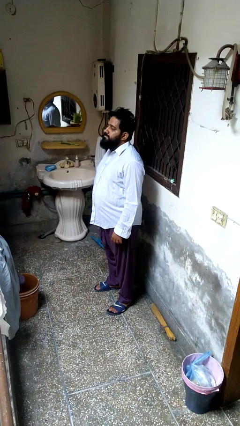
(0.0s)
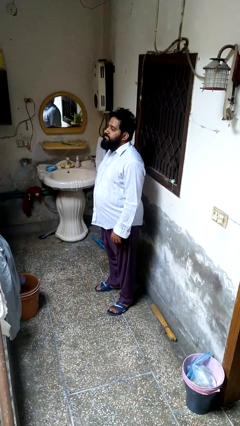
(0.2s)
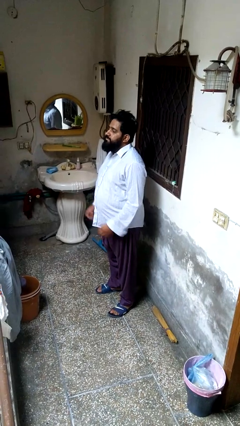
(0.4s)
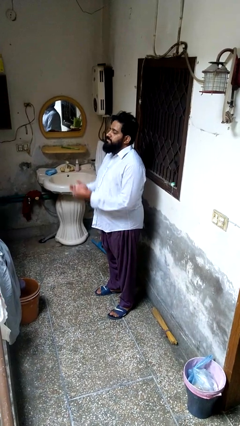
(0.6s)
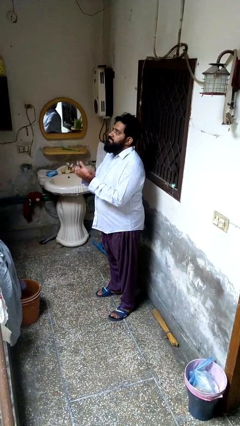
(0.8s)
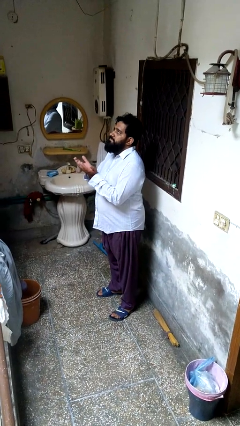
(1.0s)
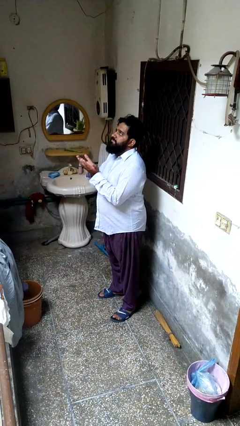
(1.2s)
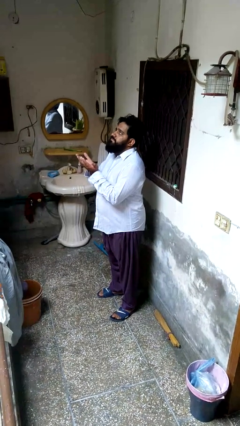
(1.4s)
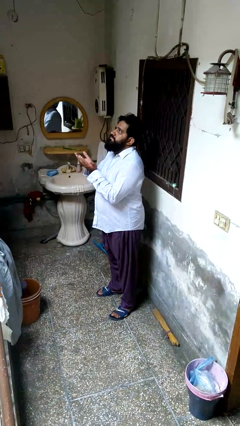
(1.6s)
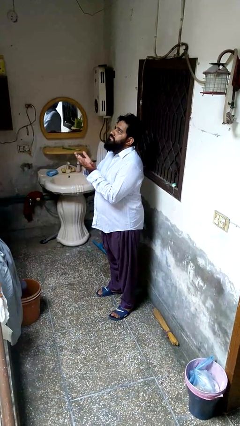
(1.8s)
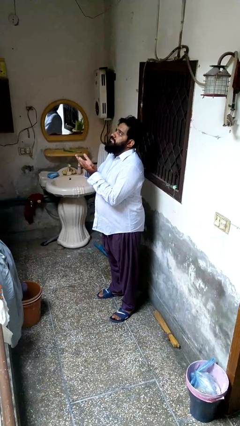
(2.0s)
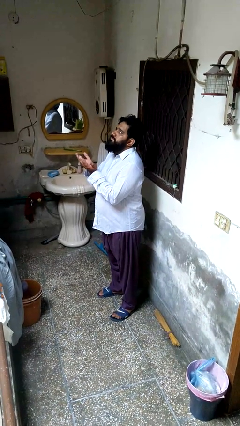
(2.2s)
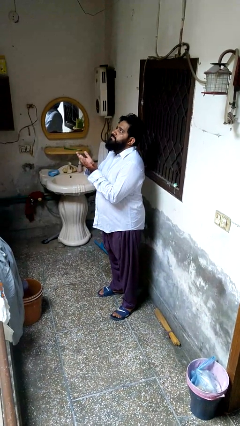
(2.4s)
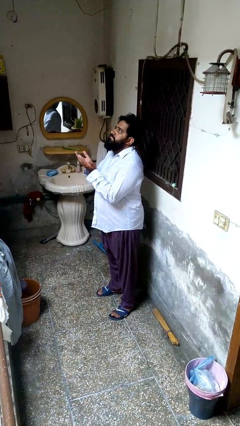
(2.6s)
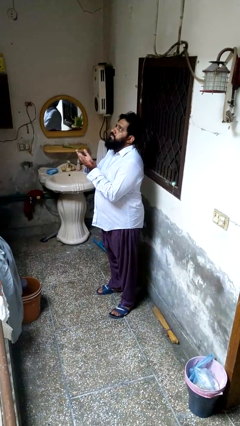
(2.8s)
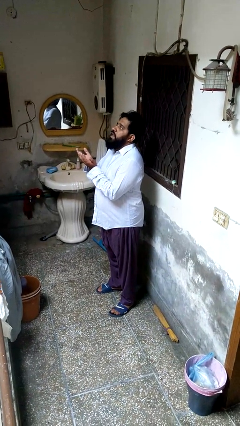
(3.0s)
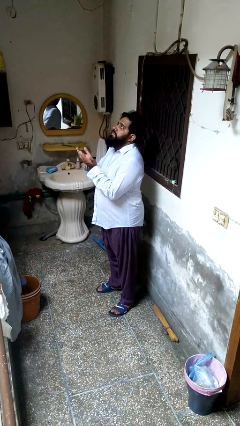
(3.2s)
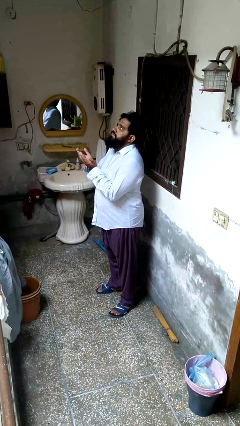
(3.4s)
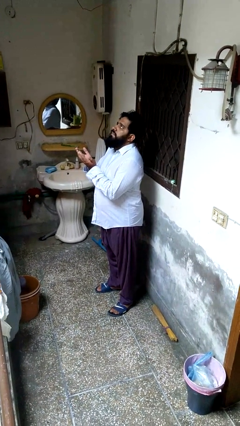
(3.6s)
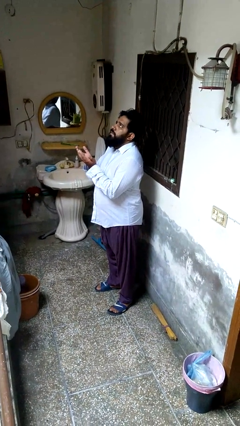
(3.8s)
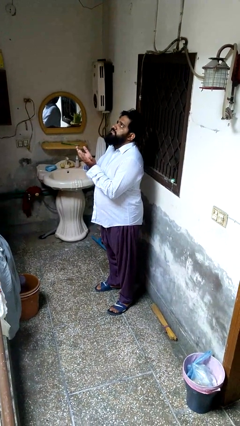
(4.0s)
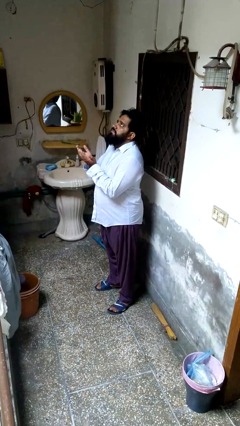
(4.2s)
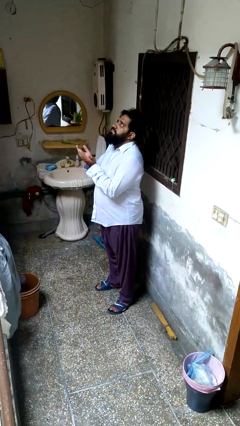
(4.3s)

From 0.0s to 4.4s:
person prays

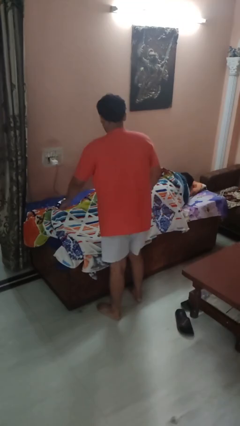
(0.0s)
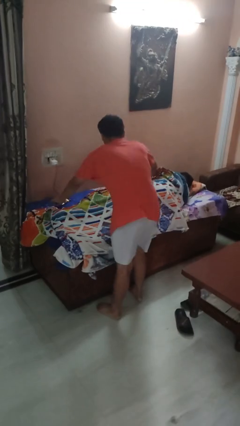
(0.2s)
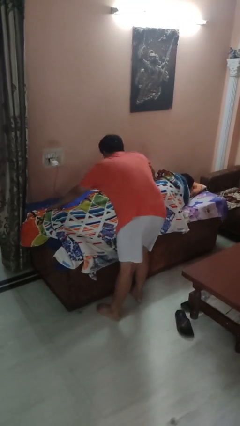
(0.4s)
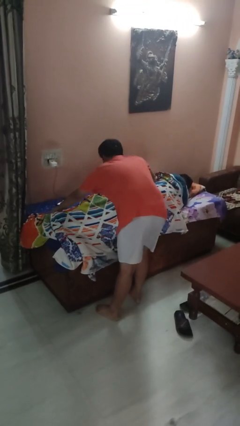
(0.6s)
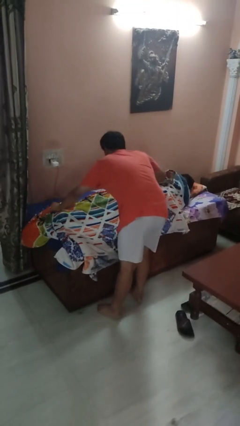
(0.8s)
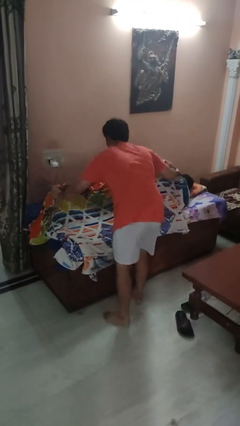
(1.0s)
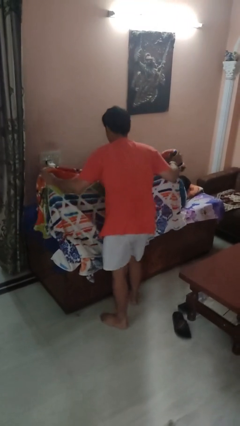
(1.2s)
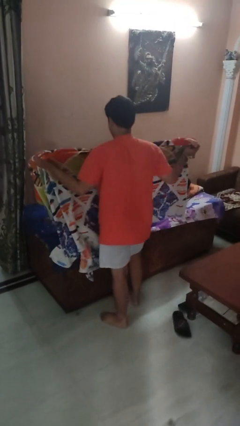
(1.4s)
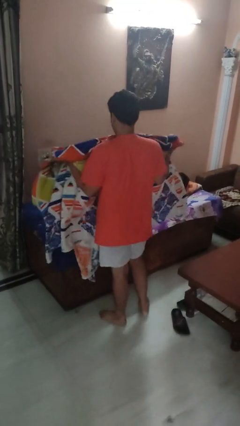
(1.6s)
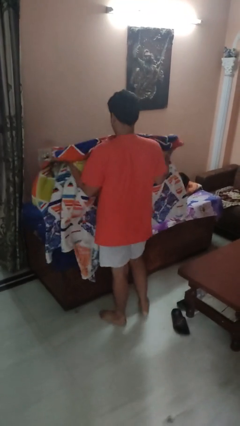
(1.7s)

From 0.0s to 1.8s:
person uncovers friend with blanket

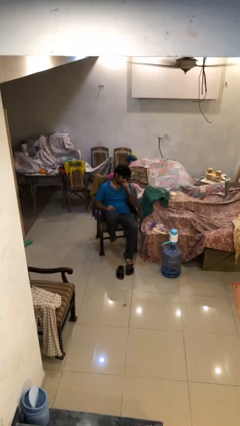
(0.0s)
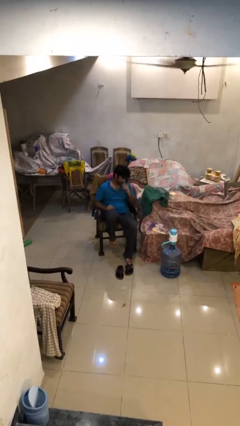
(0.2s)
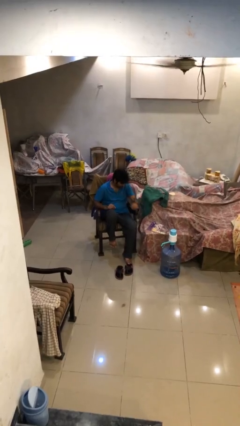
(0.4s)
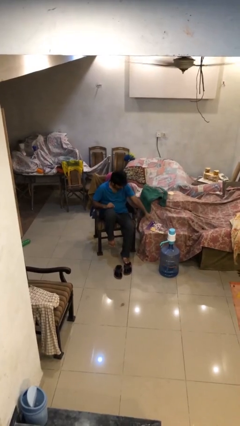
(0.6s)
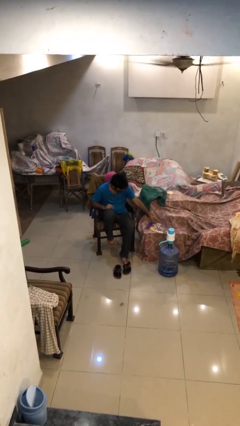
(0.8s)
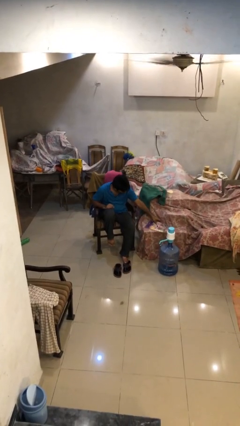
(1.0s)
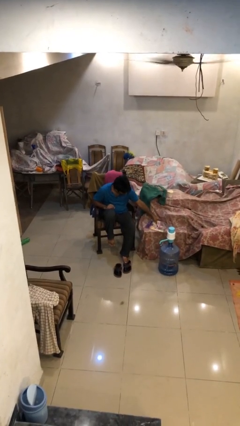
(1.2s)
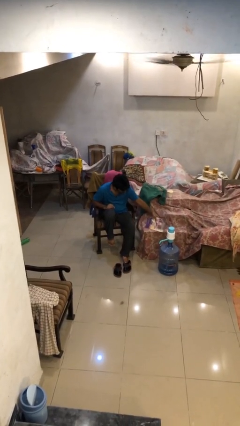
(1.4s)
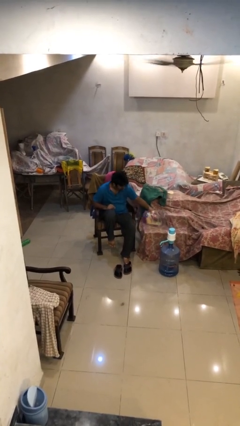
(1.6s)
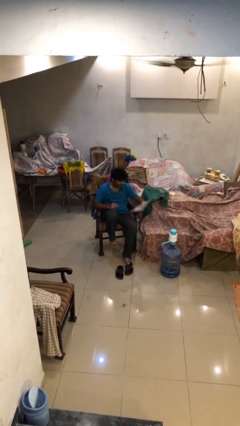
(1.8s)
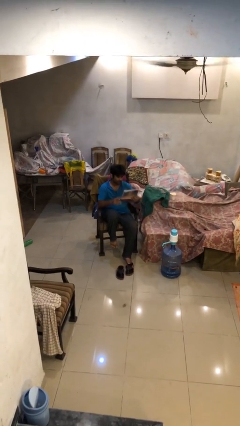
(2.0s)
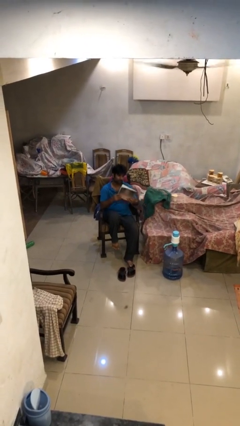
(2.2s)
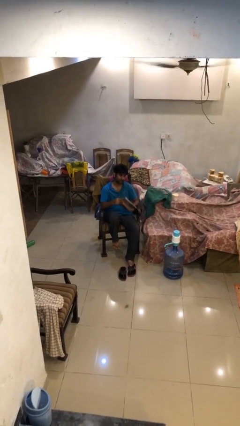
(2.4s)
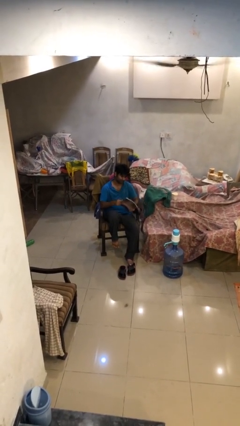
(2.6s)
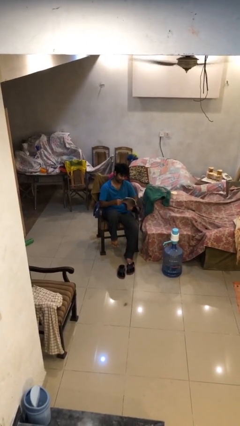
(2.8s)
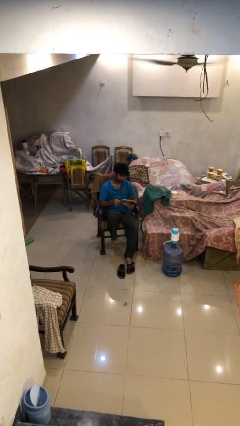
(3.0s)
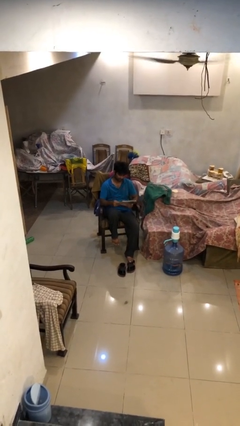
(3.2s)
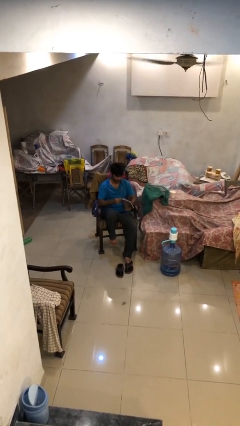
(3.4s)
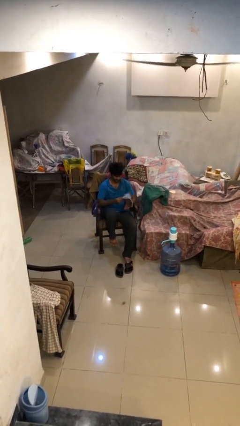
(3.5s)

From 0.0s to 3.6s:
person picks up object from table

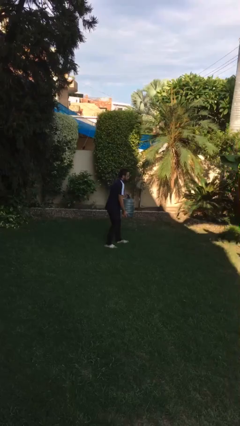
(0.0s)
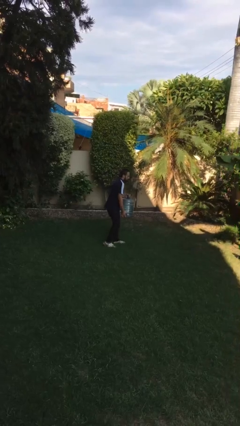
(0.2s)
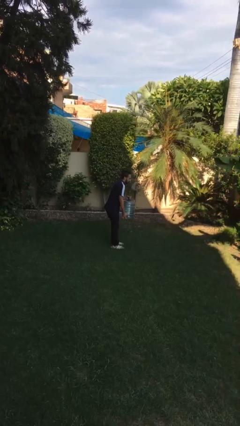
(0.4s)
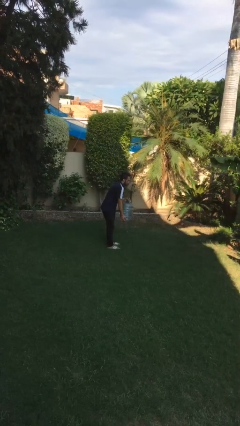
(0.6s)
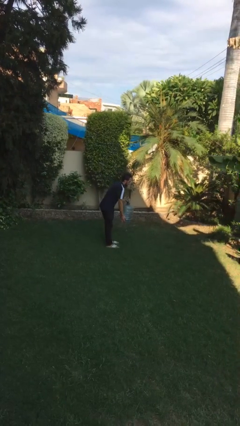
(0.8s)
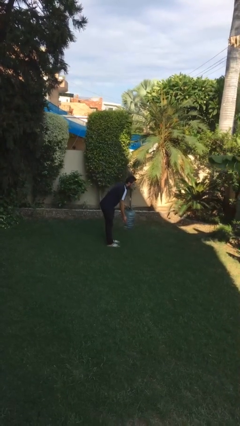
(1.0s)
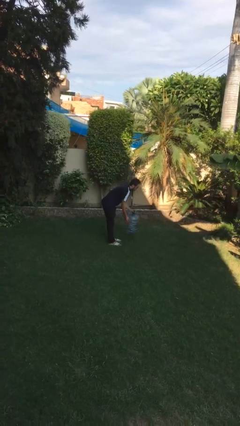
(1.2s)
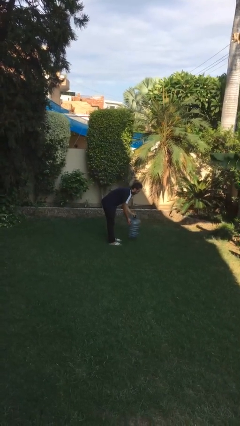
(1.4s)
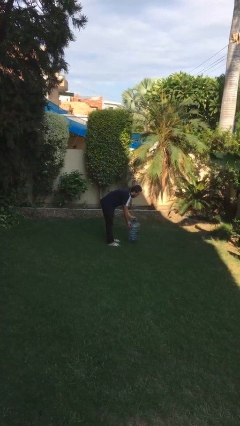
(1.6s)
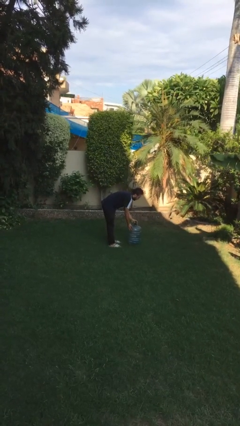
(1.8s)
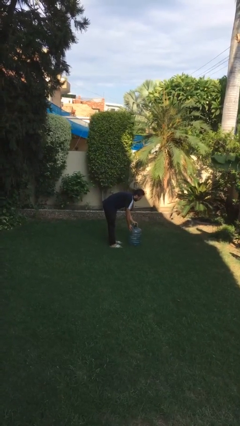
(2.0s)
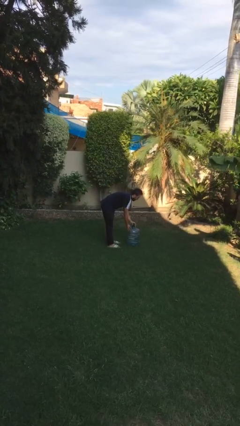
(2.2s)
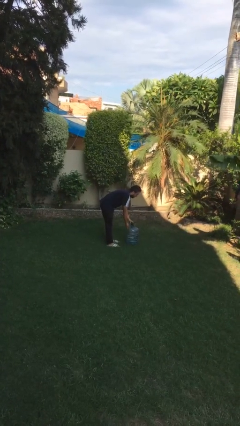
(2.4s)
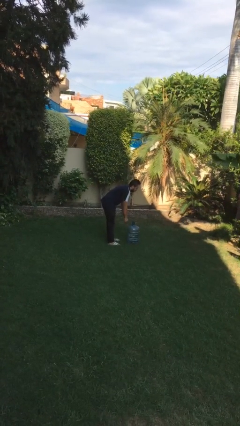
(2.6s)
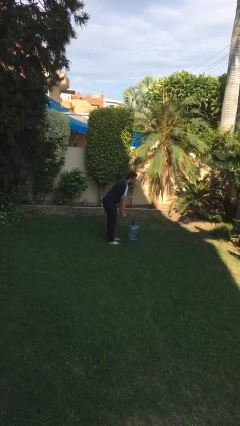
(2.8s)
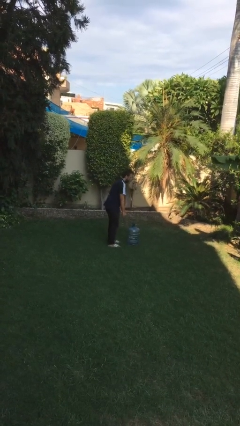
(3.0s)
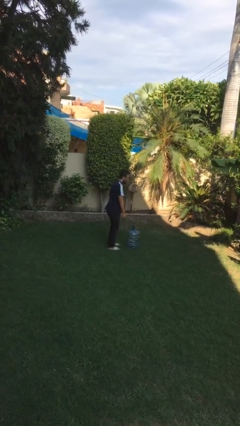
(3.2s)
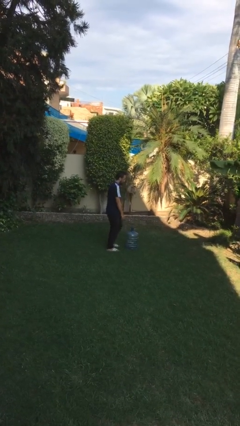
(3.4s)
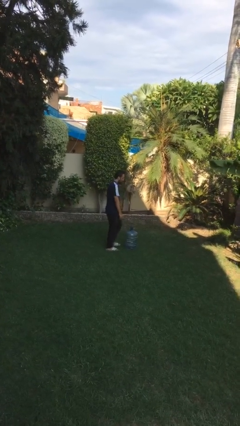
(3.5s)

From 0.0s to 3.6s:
person puts down object on floor

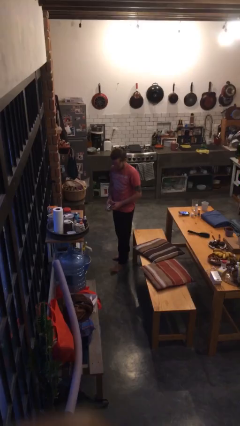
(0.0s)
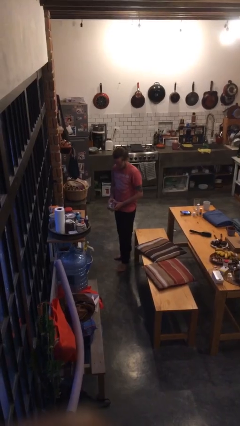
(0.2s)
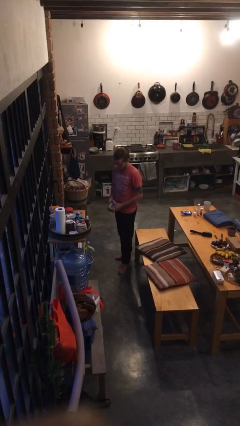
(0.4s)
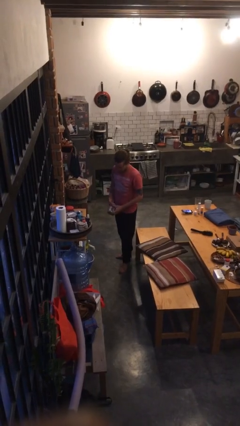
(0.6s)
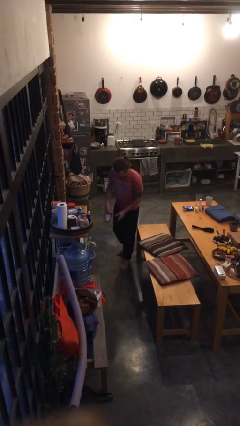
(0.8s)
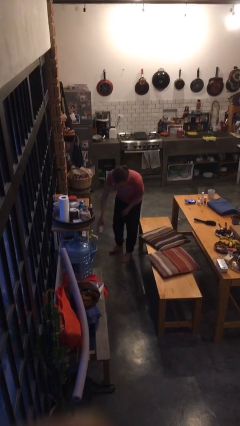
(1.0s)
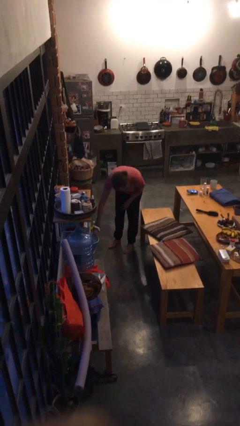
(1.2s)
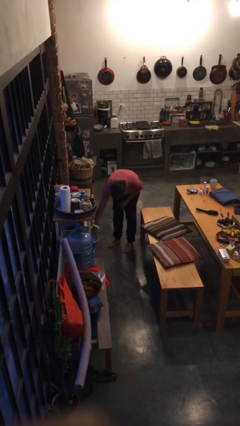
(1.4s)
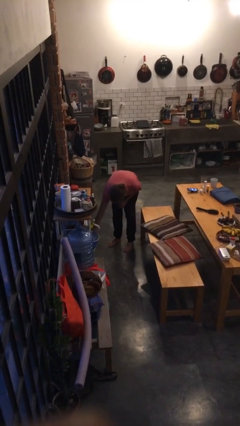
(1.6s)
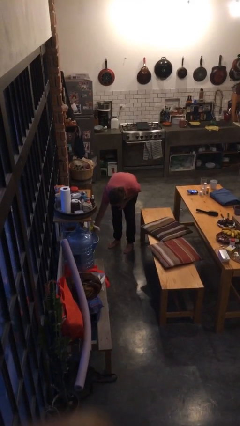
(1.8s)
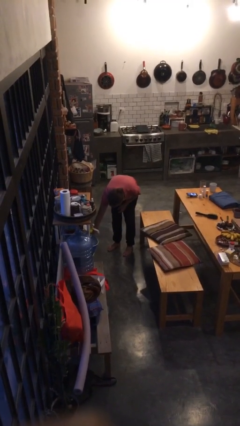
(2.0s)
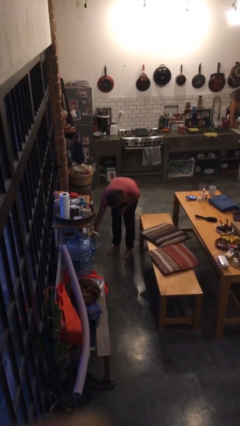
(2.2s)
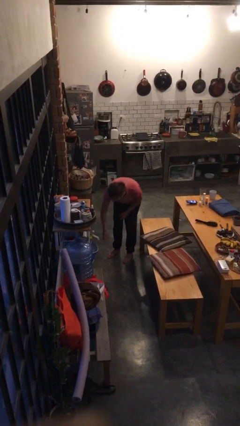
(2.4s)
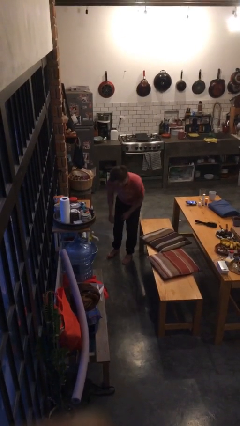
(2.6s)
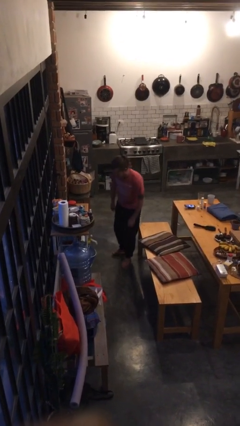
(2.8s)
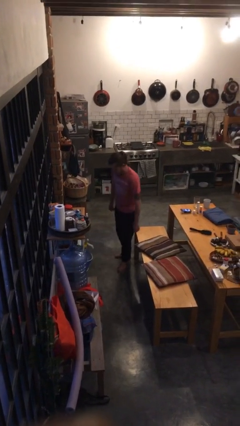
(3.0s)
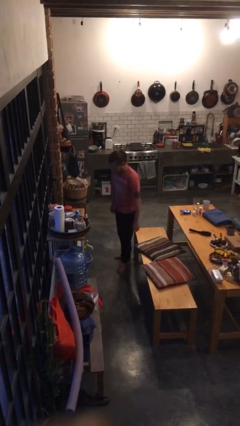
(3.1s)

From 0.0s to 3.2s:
person puts down object into cabinet

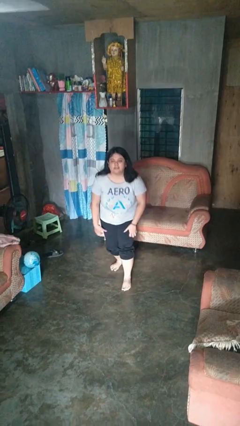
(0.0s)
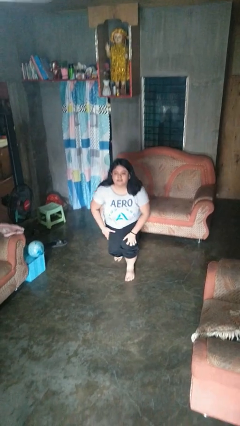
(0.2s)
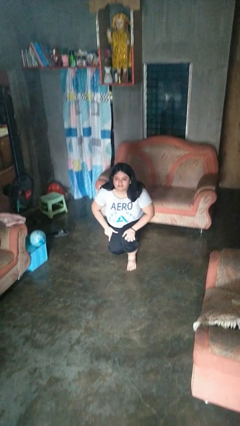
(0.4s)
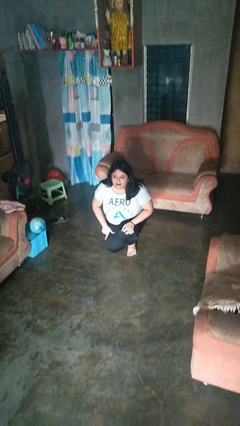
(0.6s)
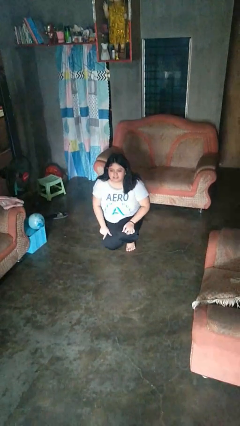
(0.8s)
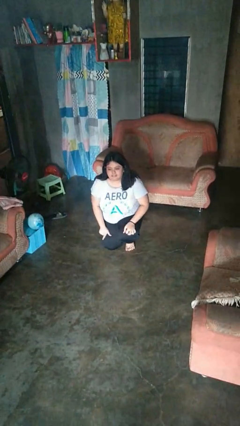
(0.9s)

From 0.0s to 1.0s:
person kneels

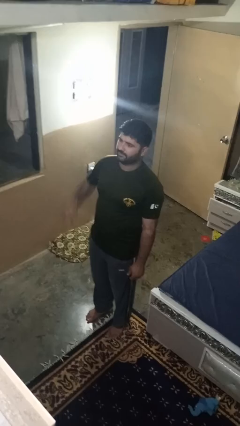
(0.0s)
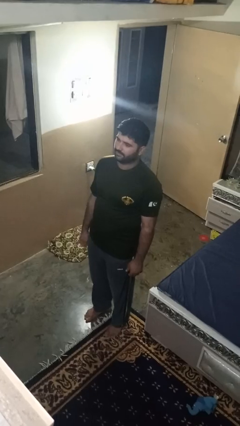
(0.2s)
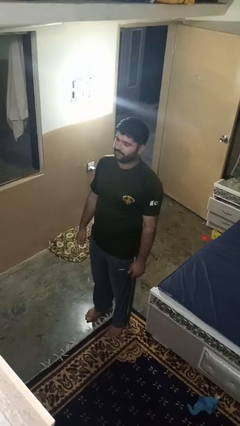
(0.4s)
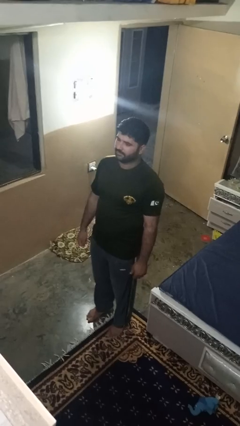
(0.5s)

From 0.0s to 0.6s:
person salutes
